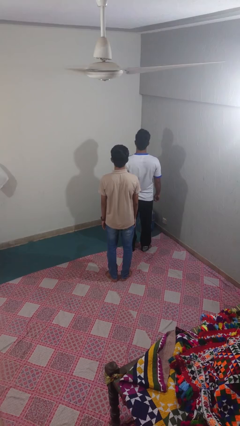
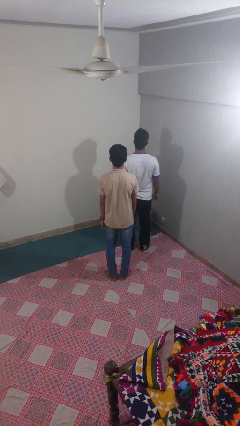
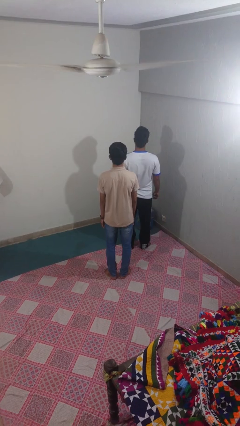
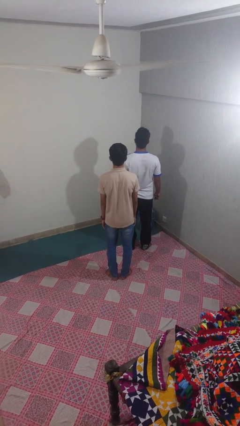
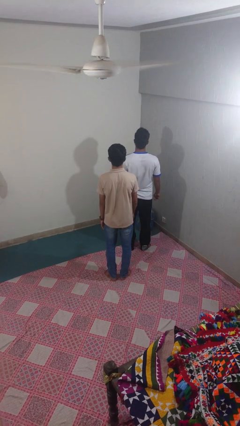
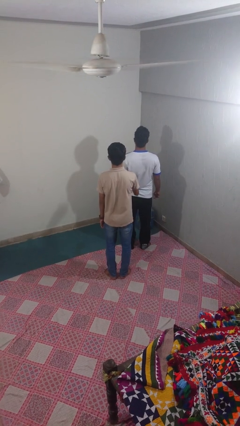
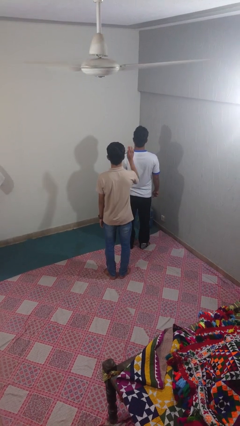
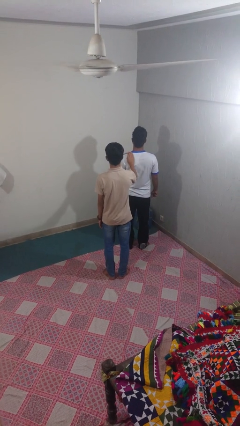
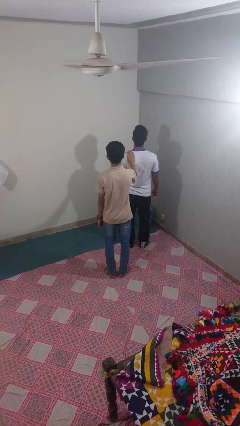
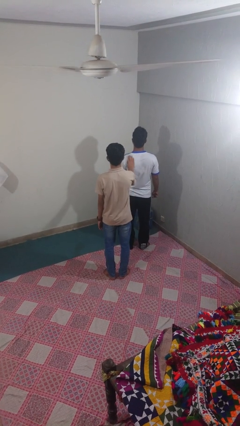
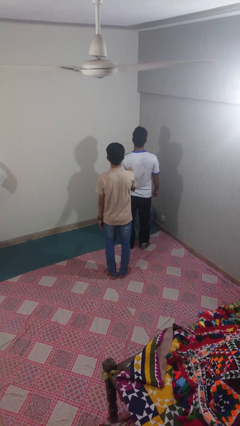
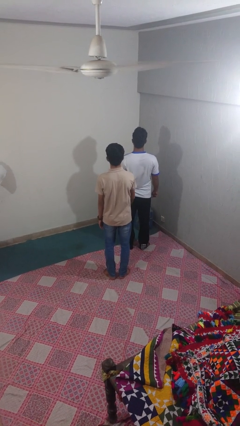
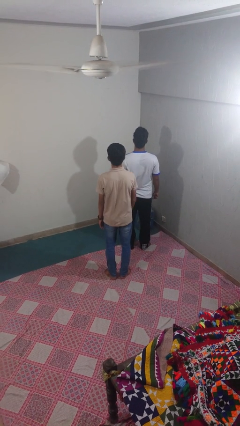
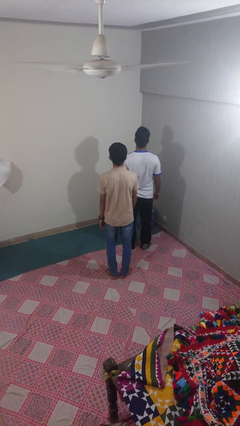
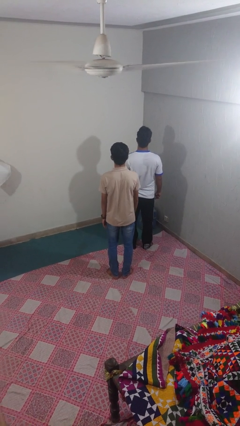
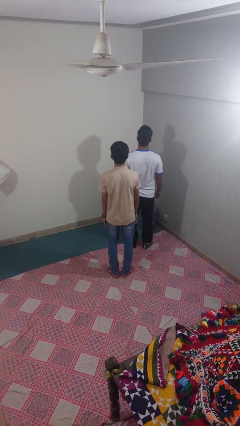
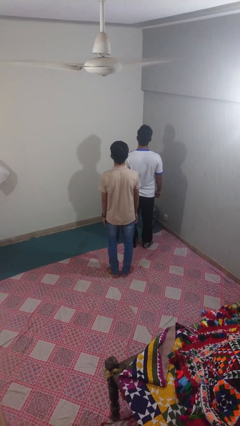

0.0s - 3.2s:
person touches back of person

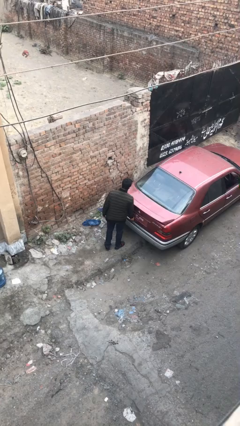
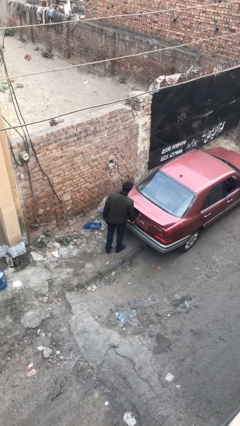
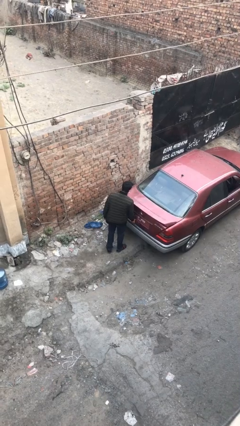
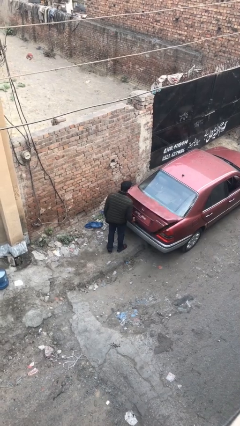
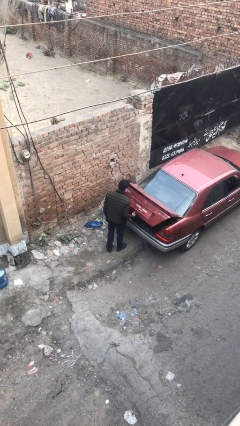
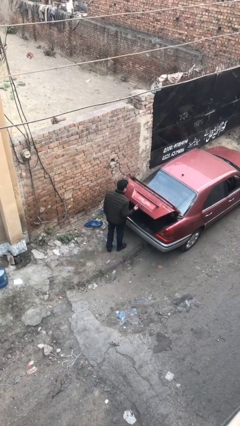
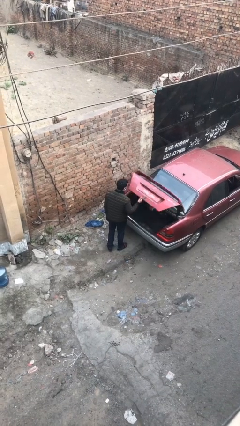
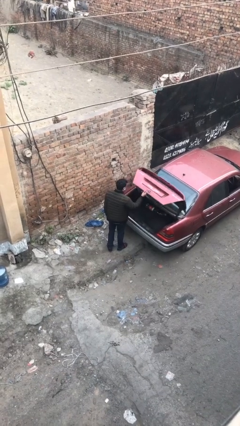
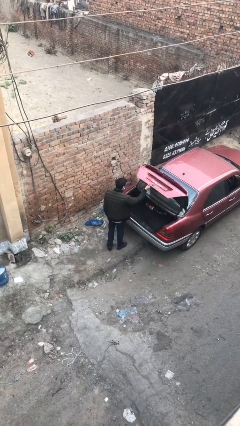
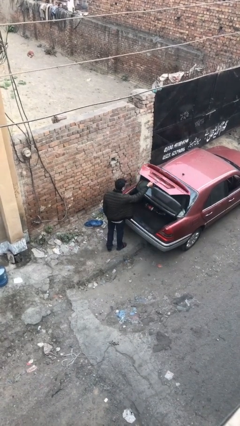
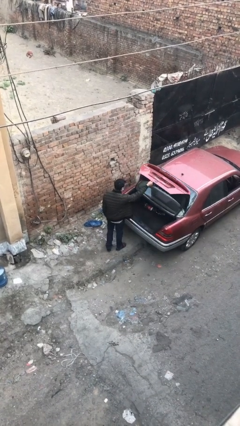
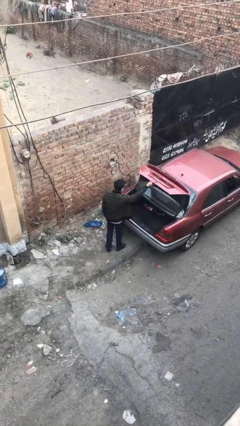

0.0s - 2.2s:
person opens car trunk

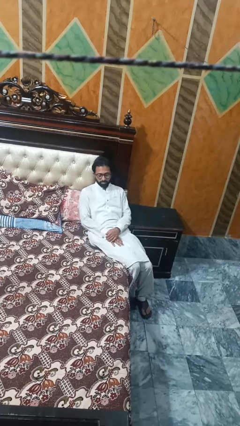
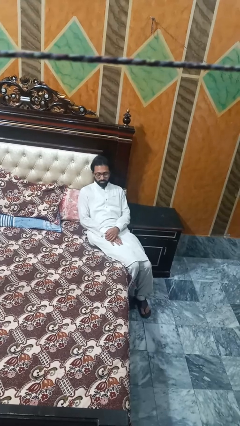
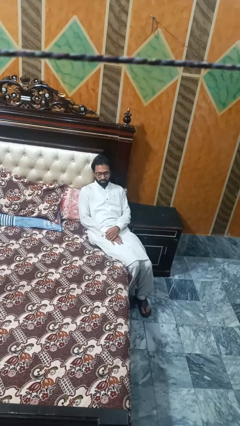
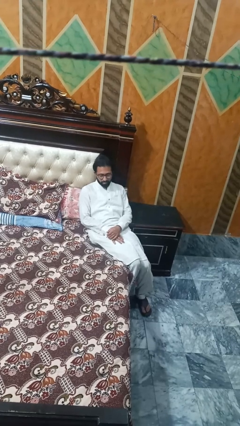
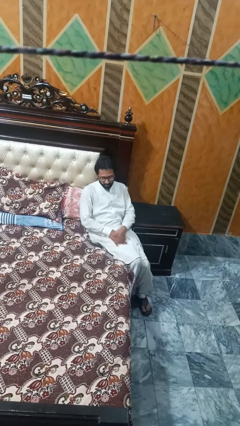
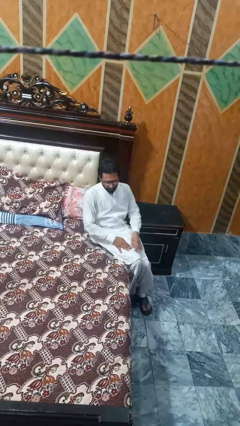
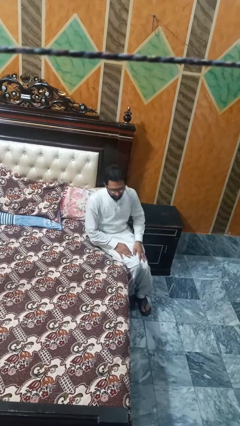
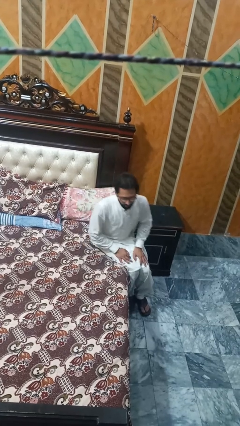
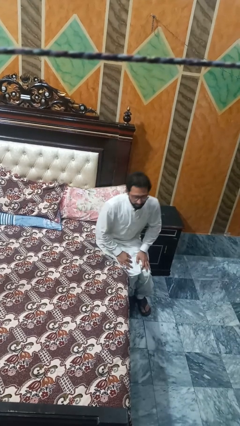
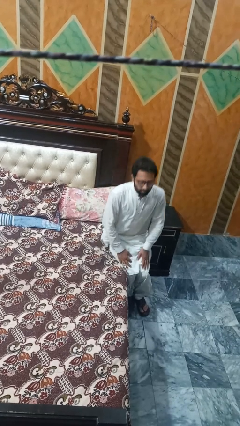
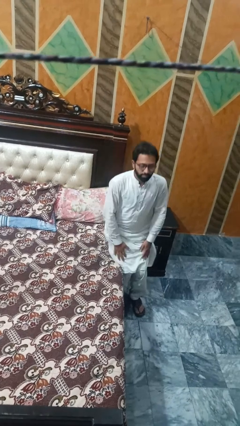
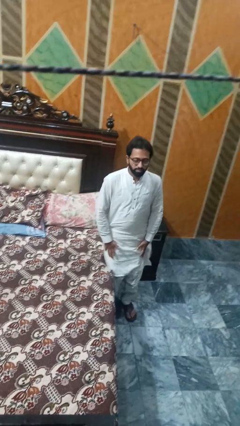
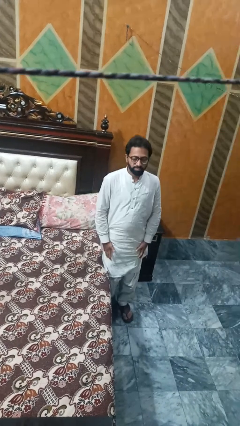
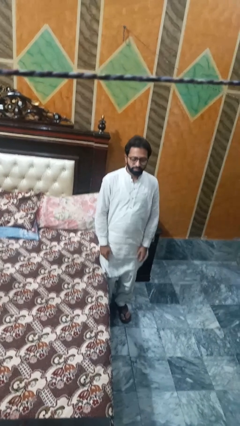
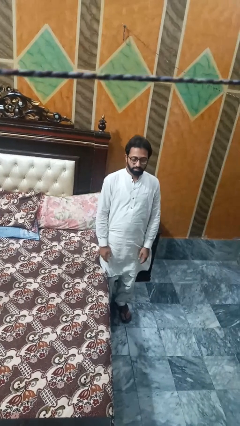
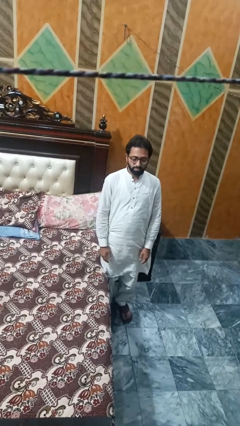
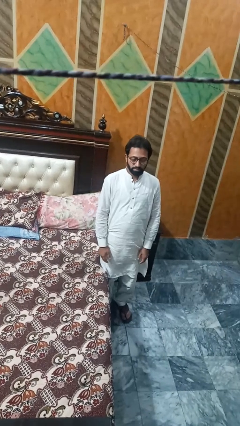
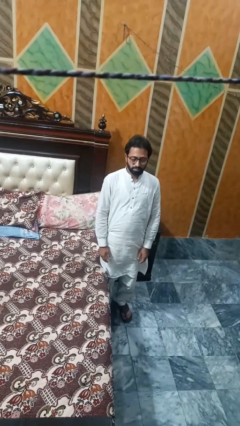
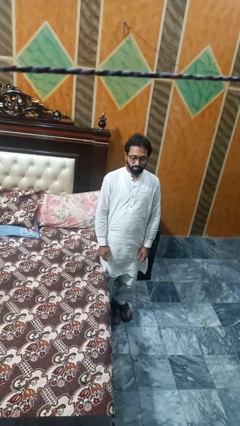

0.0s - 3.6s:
person stands up

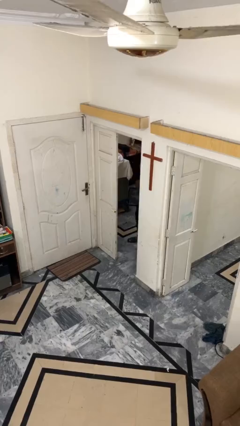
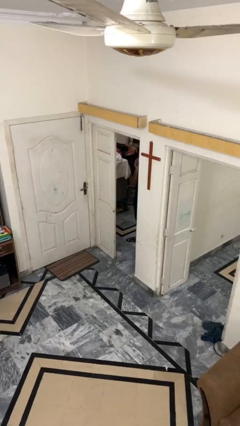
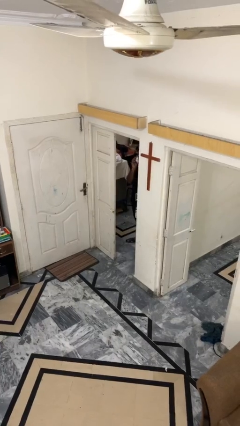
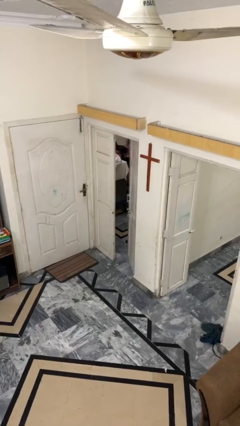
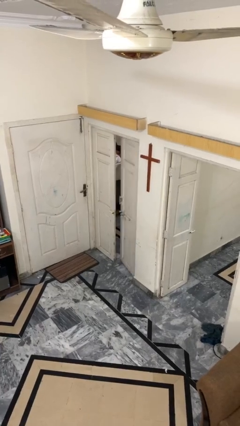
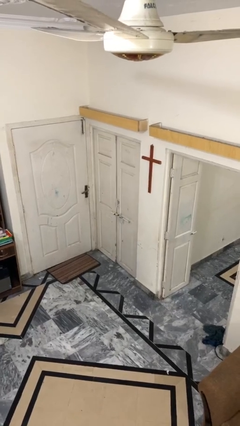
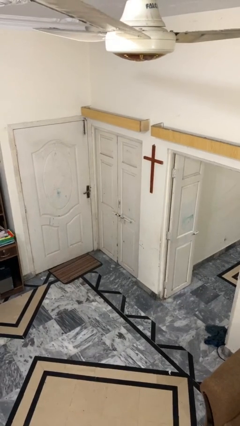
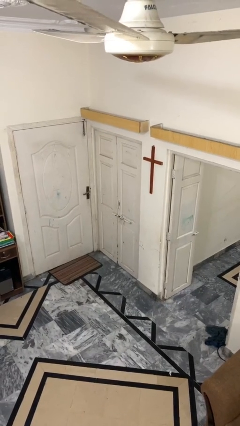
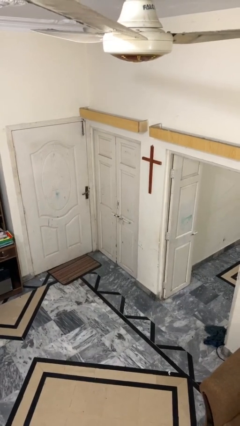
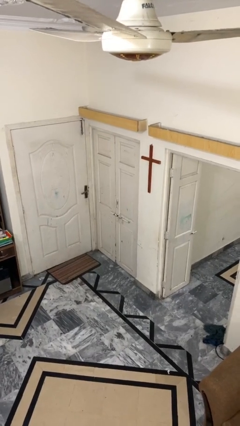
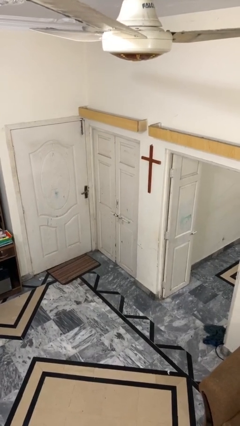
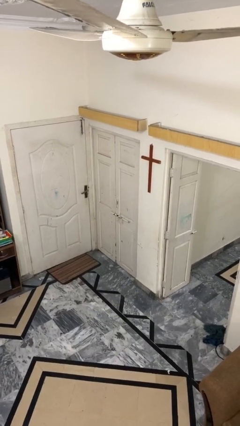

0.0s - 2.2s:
person closes facility door

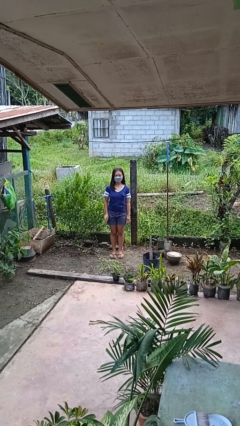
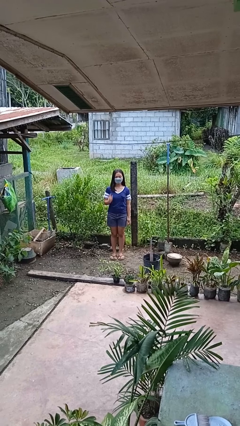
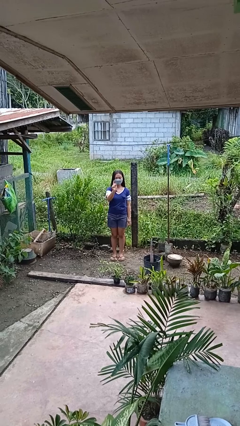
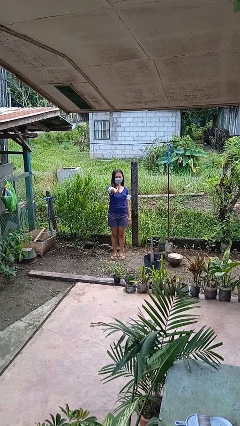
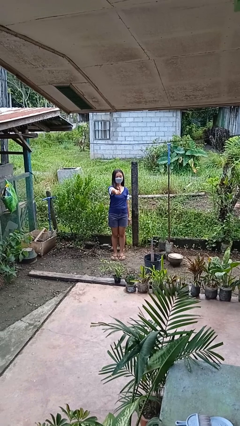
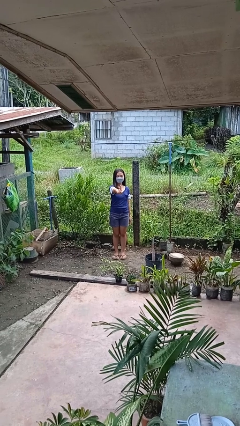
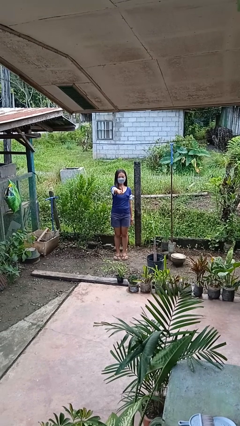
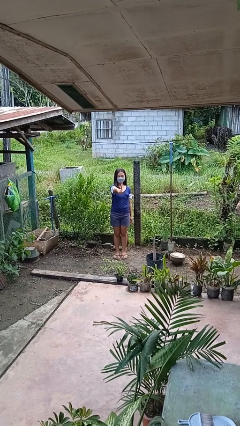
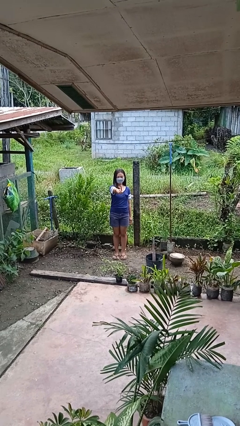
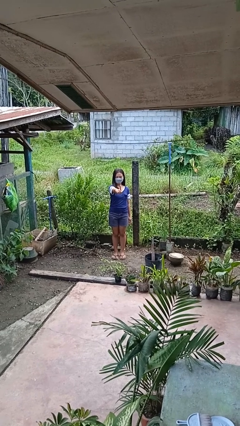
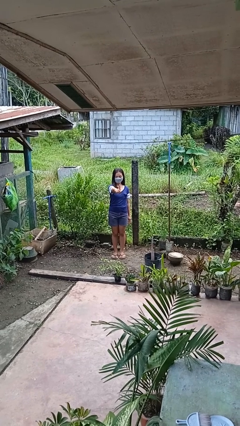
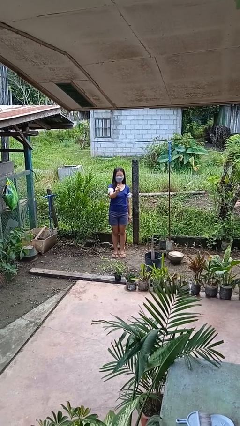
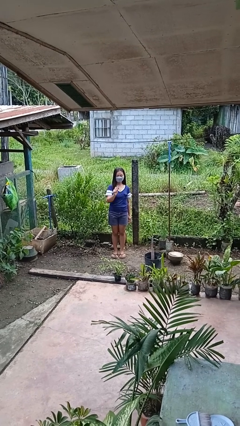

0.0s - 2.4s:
person gestures number one

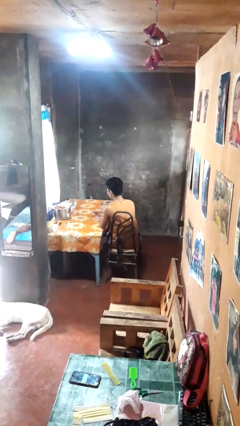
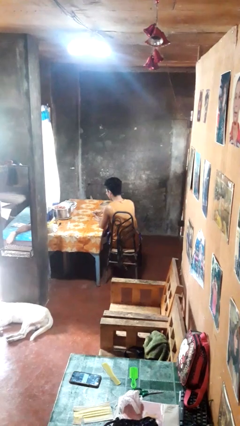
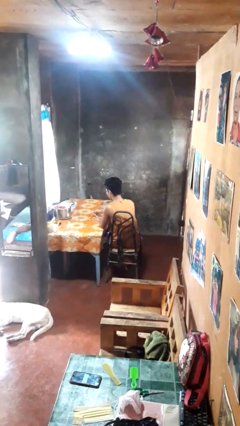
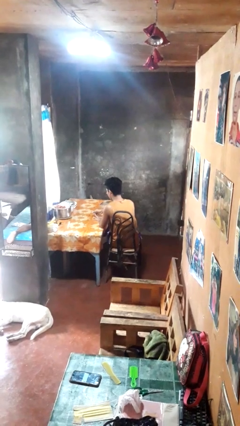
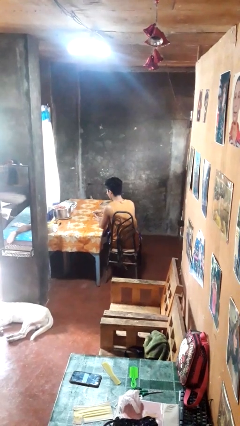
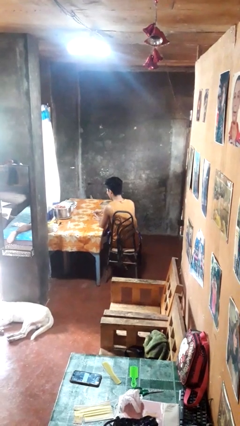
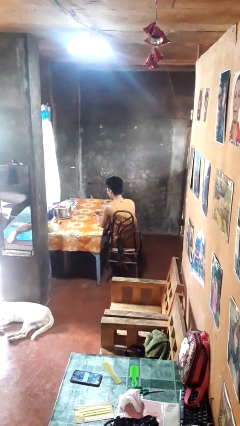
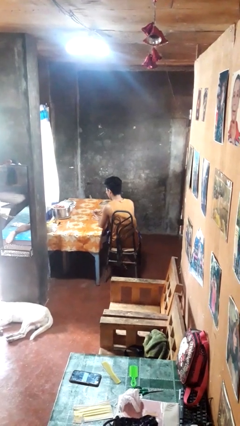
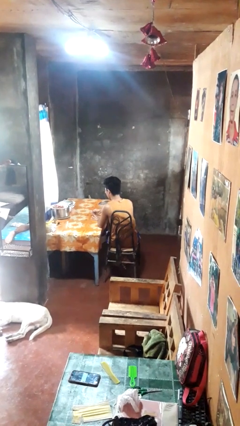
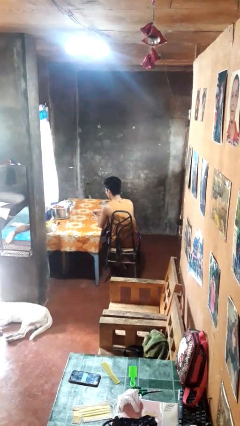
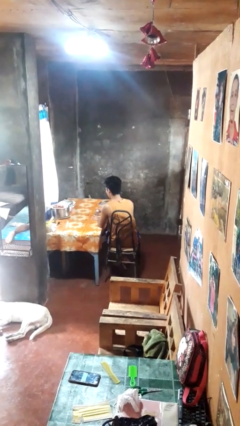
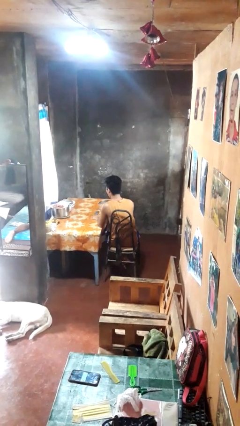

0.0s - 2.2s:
person clips fingernails

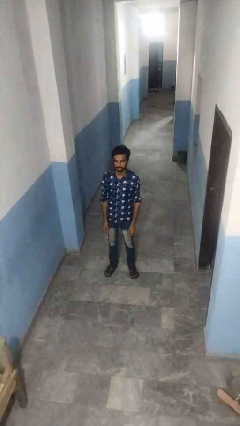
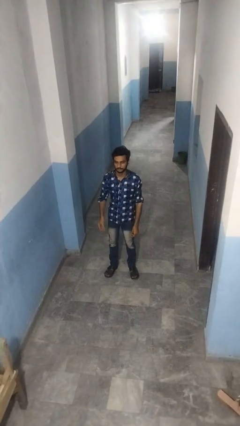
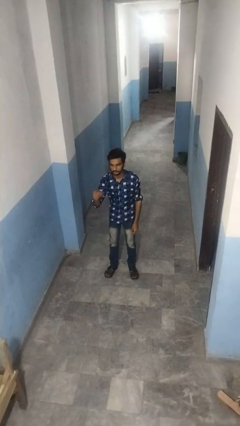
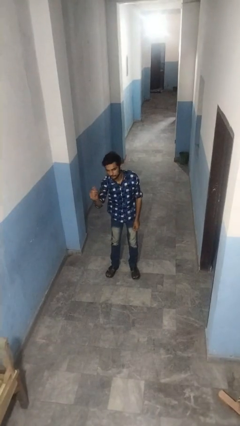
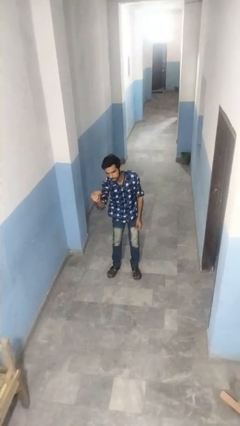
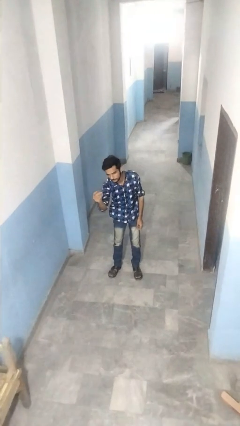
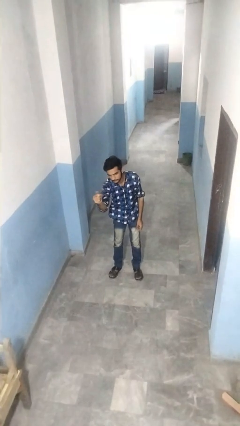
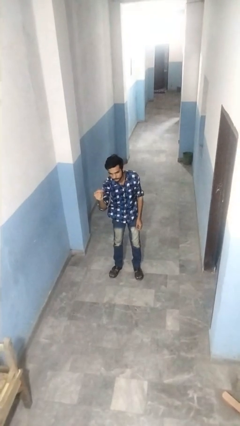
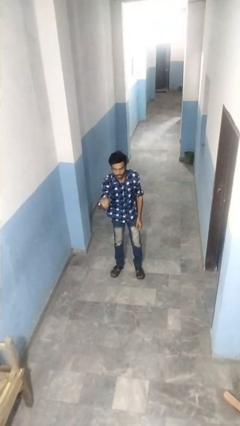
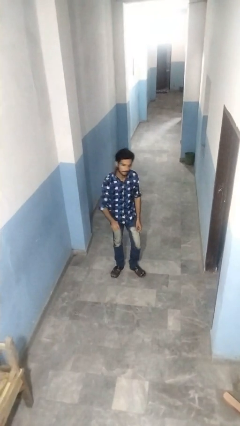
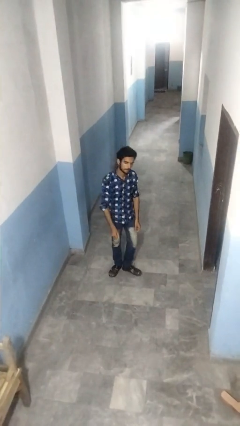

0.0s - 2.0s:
person snaps fingers
